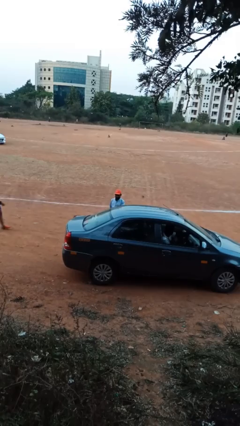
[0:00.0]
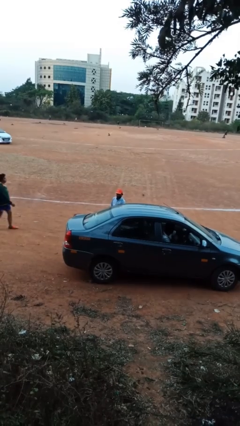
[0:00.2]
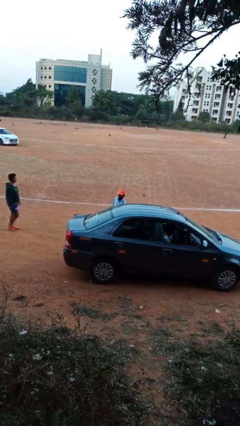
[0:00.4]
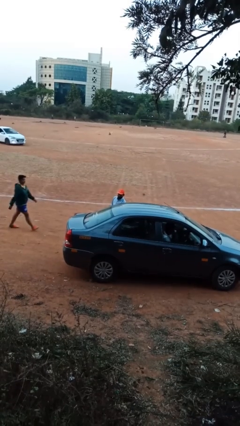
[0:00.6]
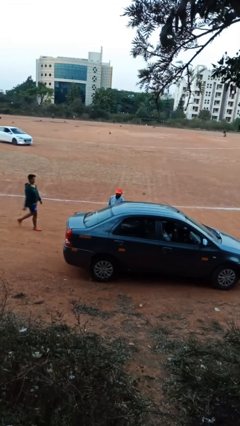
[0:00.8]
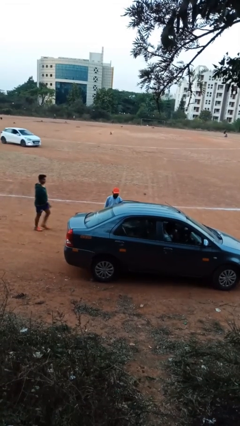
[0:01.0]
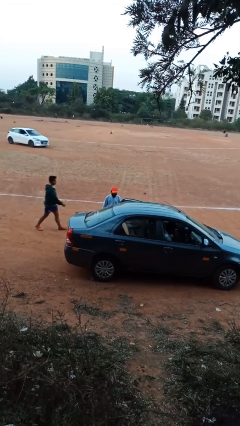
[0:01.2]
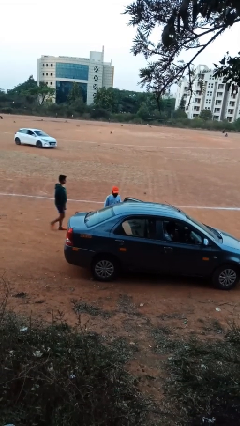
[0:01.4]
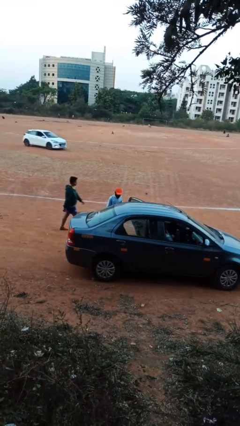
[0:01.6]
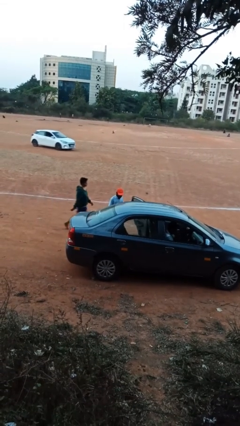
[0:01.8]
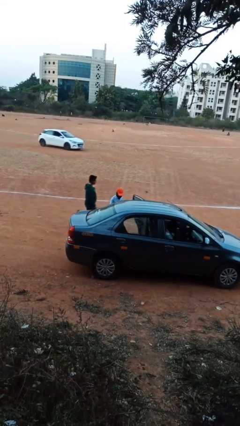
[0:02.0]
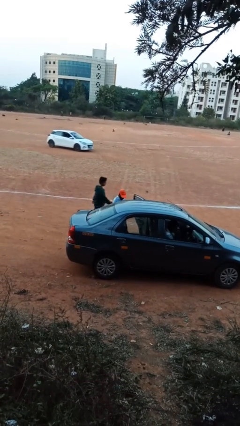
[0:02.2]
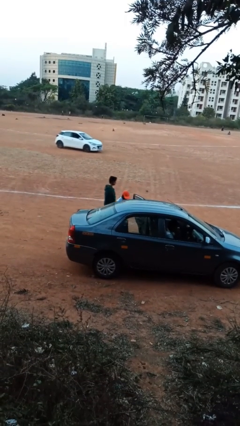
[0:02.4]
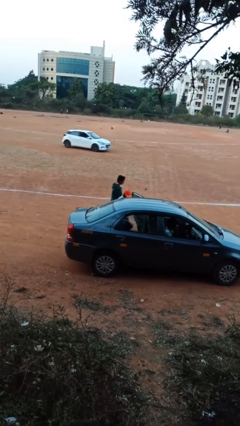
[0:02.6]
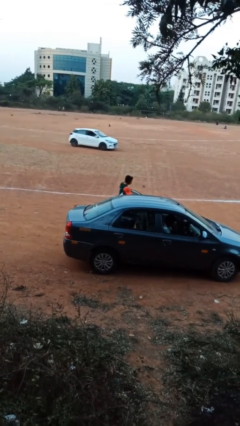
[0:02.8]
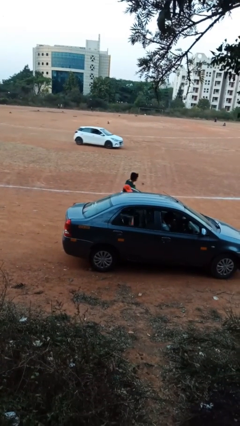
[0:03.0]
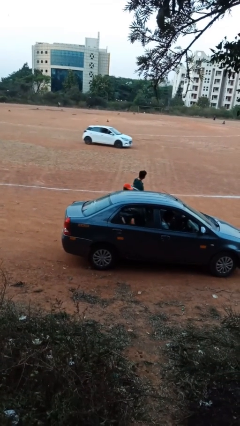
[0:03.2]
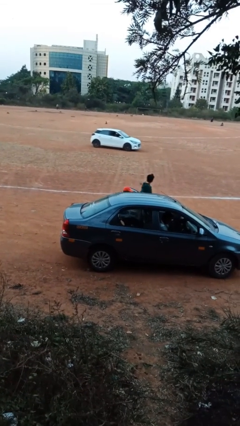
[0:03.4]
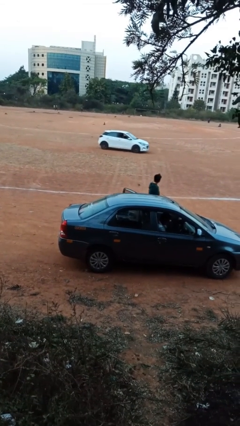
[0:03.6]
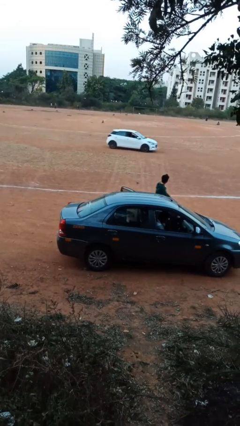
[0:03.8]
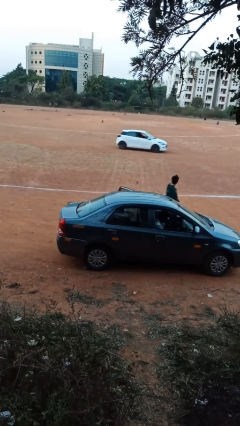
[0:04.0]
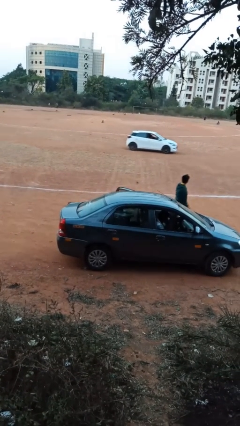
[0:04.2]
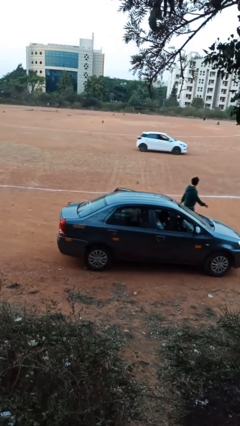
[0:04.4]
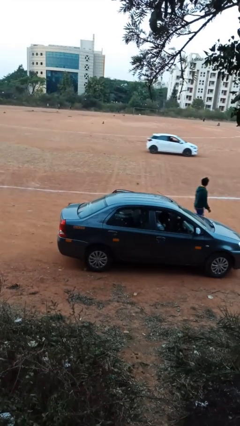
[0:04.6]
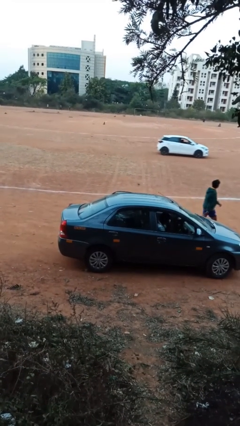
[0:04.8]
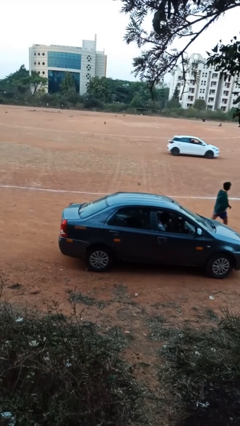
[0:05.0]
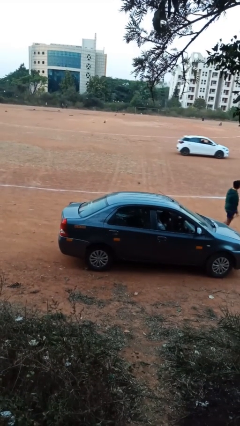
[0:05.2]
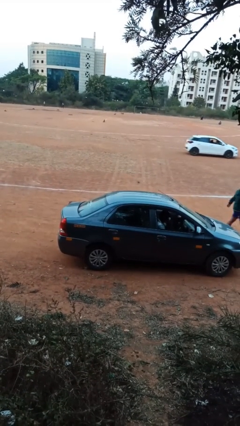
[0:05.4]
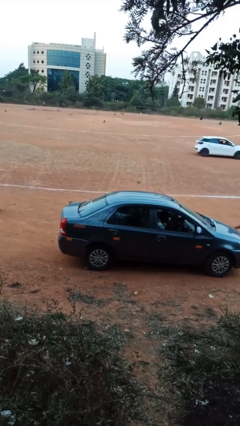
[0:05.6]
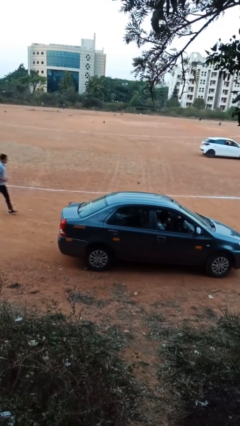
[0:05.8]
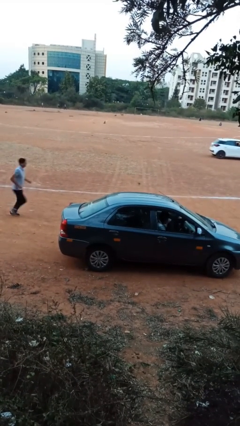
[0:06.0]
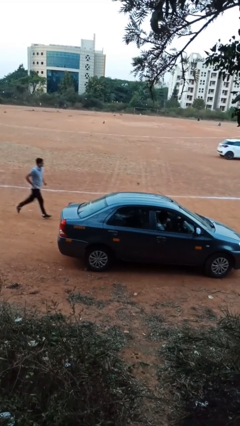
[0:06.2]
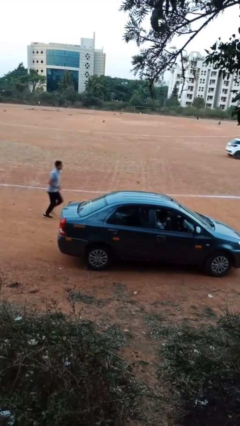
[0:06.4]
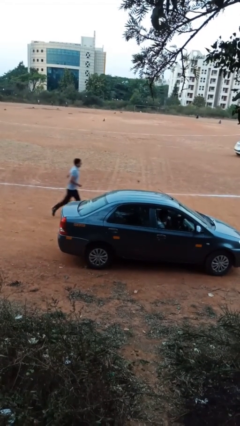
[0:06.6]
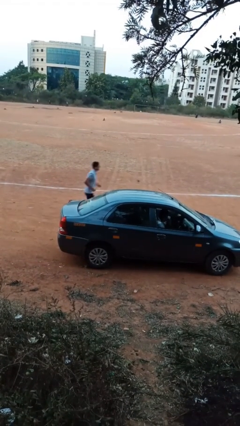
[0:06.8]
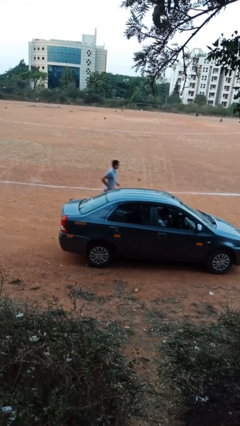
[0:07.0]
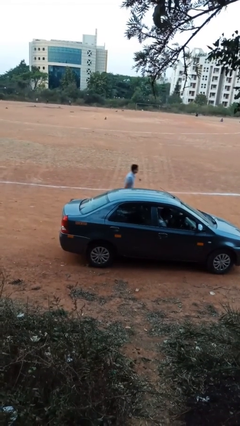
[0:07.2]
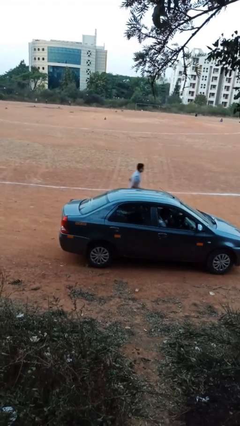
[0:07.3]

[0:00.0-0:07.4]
person enters car

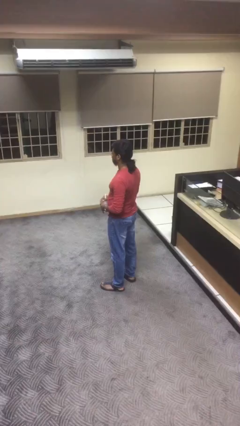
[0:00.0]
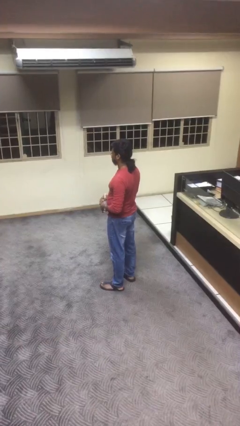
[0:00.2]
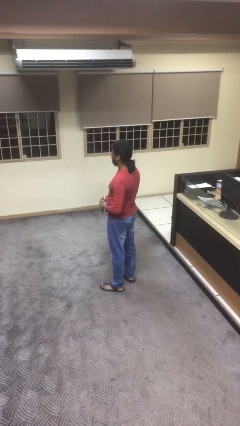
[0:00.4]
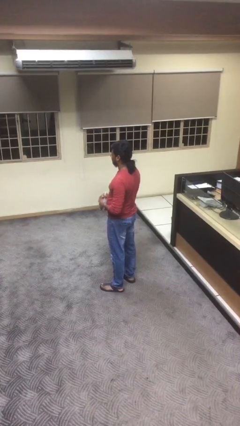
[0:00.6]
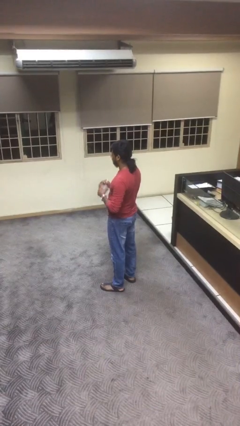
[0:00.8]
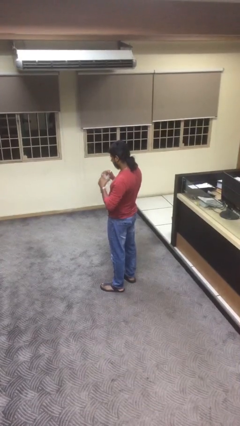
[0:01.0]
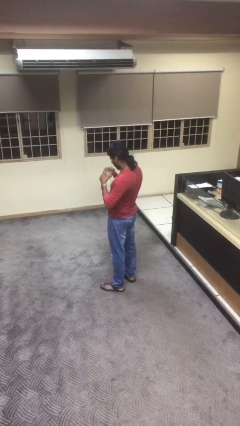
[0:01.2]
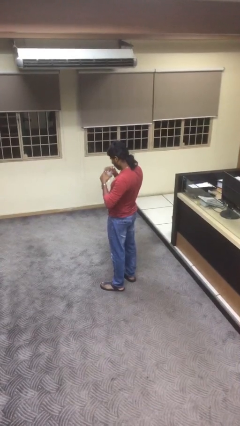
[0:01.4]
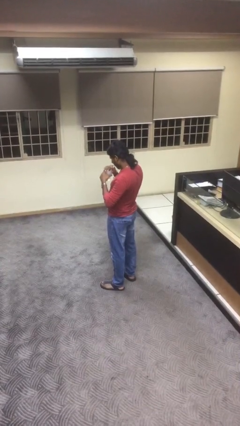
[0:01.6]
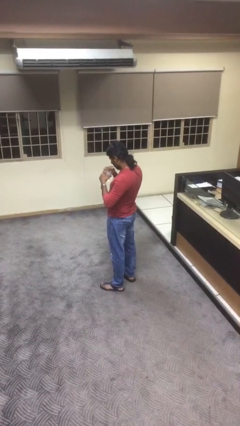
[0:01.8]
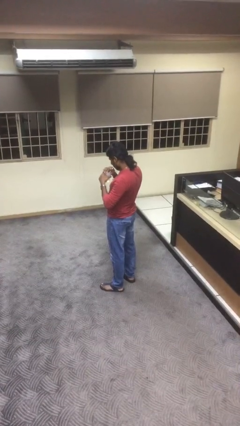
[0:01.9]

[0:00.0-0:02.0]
person drinks from straw

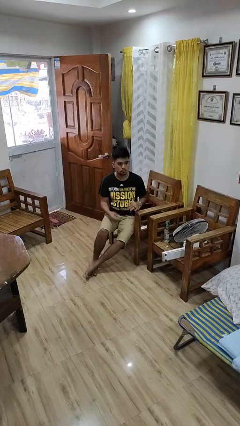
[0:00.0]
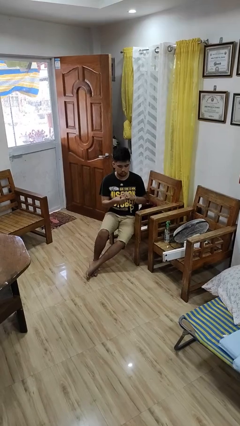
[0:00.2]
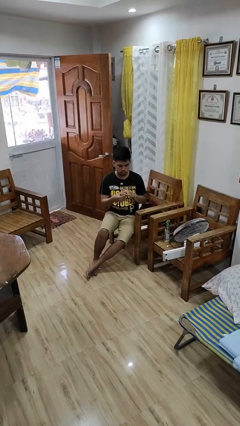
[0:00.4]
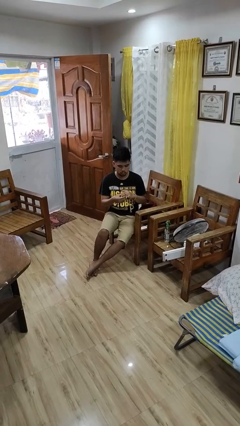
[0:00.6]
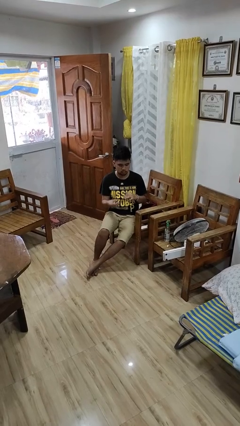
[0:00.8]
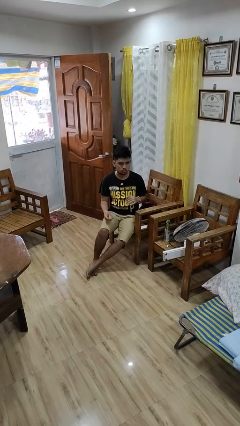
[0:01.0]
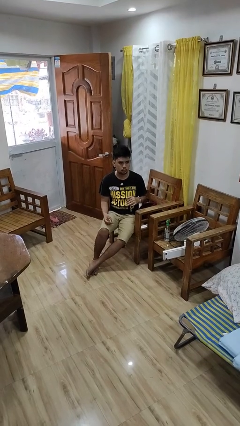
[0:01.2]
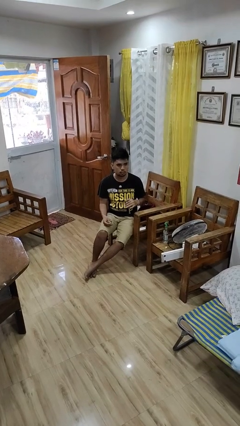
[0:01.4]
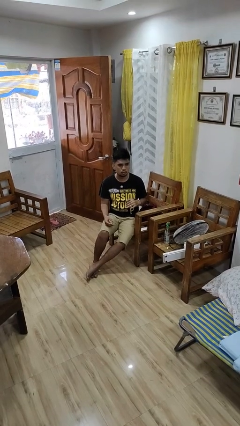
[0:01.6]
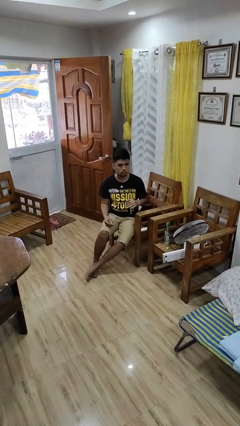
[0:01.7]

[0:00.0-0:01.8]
person takes off ring

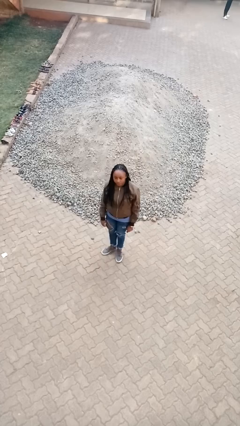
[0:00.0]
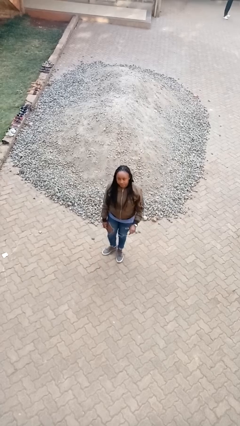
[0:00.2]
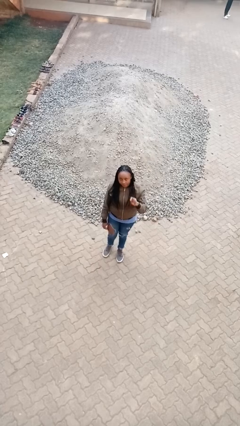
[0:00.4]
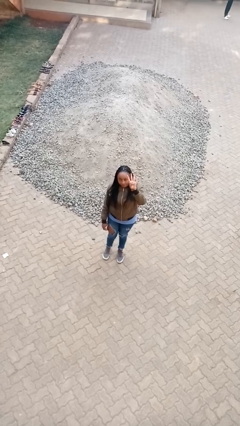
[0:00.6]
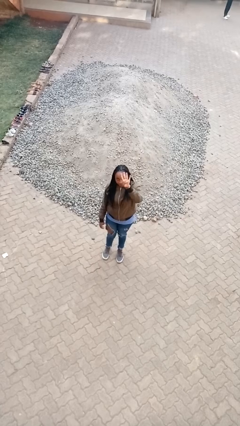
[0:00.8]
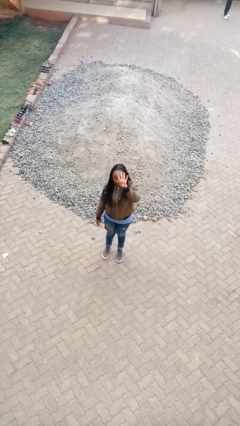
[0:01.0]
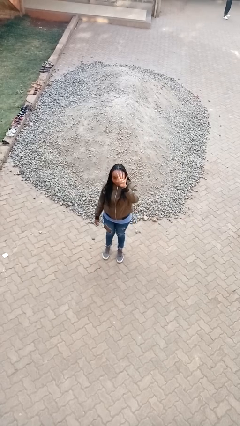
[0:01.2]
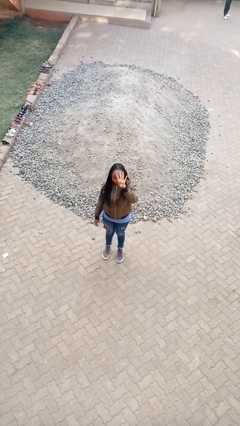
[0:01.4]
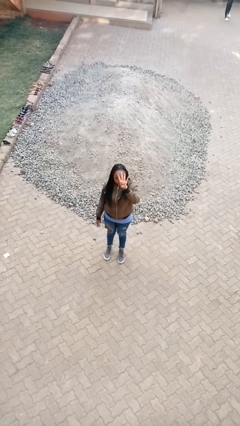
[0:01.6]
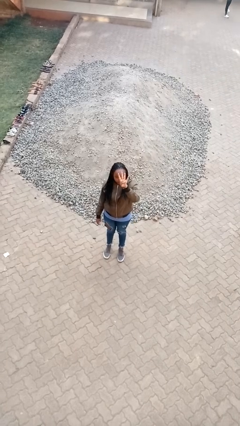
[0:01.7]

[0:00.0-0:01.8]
person gestures number four

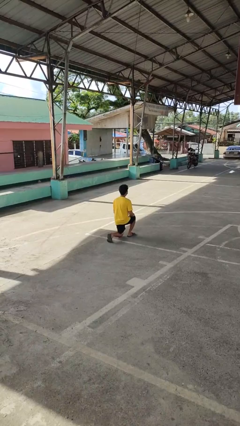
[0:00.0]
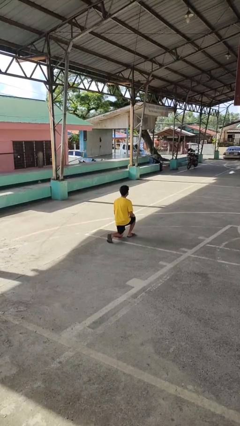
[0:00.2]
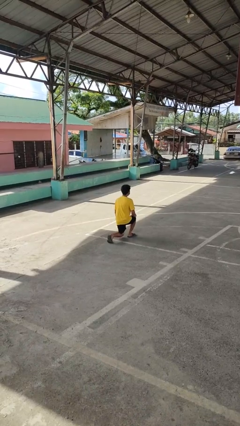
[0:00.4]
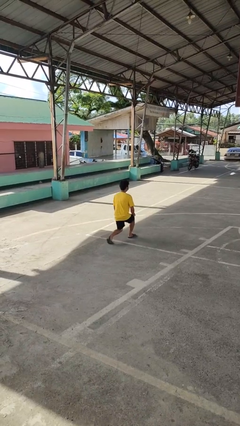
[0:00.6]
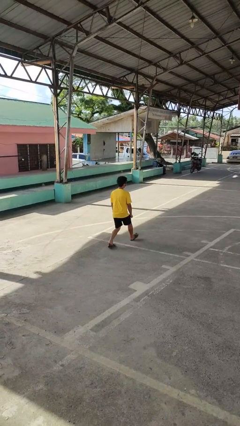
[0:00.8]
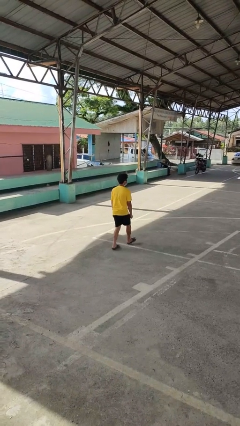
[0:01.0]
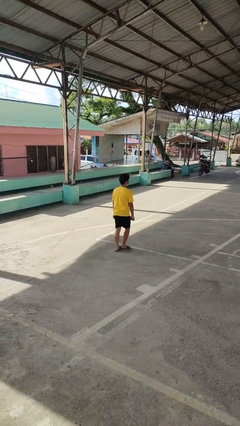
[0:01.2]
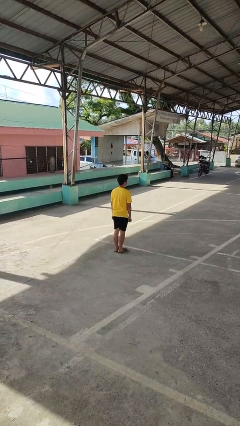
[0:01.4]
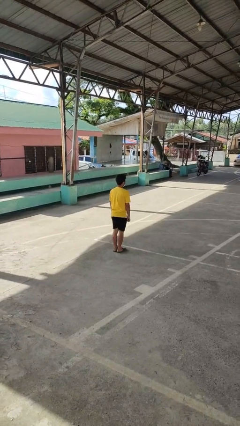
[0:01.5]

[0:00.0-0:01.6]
person stands up from floor

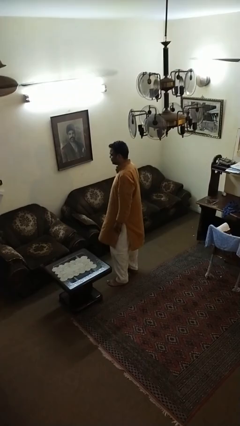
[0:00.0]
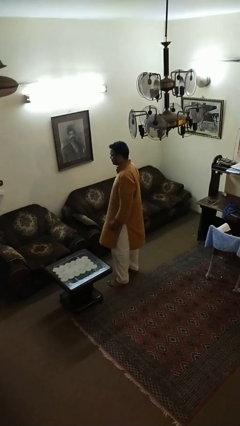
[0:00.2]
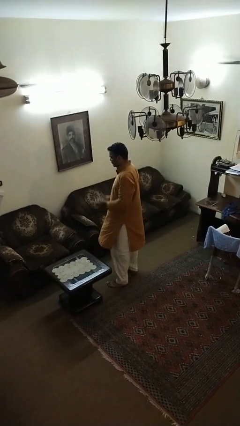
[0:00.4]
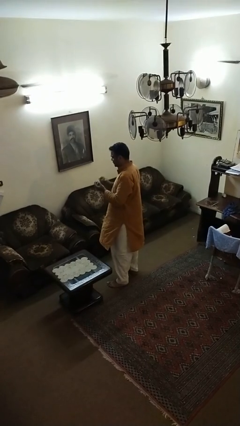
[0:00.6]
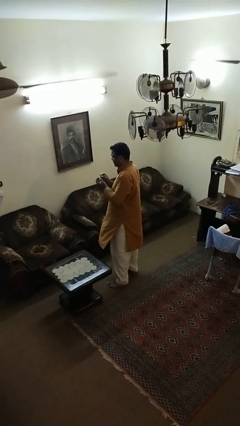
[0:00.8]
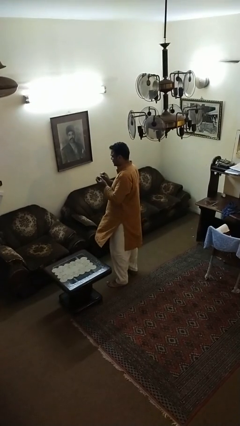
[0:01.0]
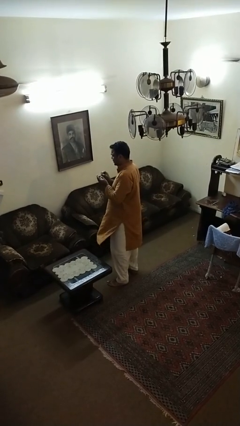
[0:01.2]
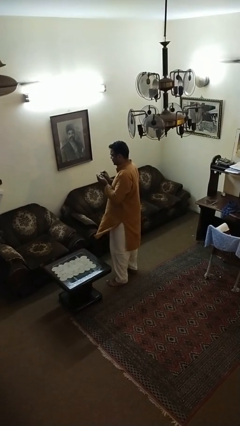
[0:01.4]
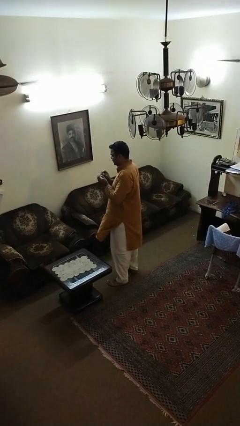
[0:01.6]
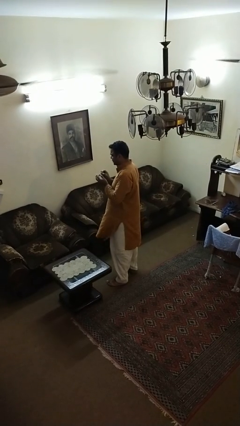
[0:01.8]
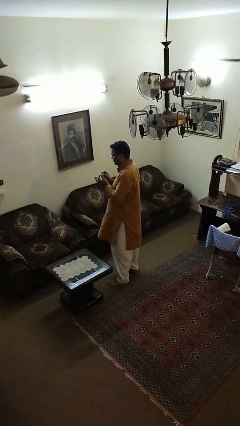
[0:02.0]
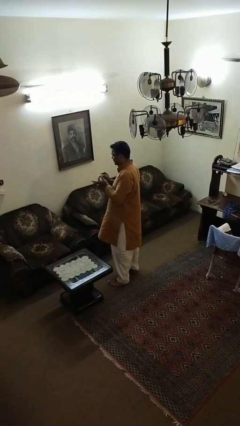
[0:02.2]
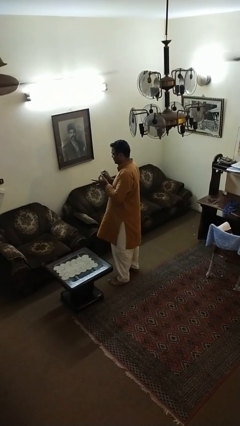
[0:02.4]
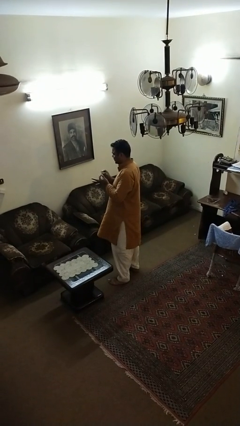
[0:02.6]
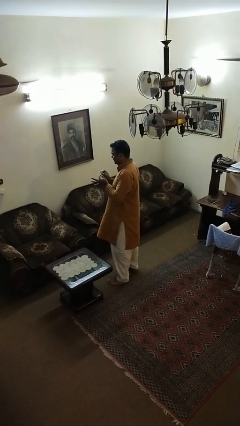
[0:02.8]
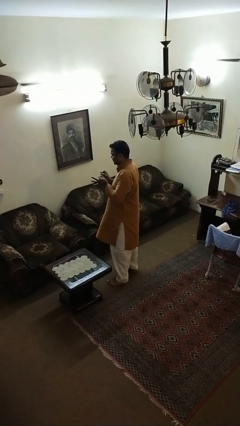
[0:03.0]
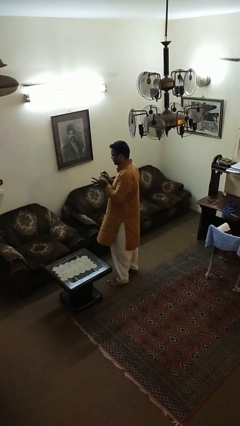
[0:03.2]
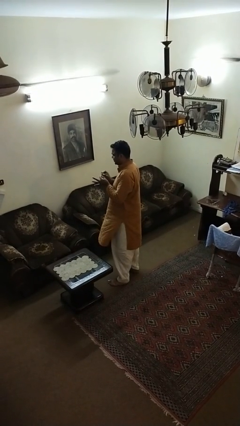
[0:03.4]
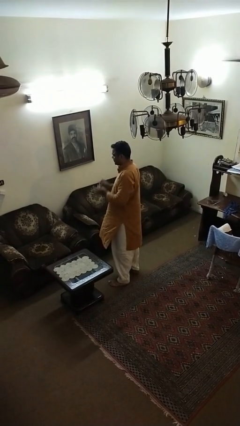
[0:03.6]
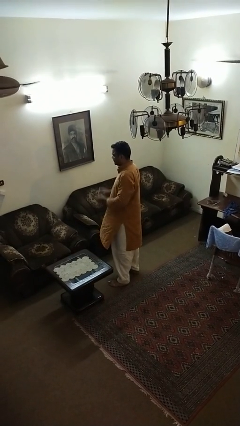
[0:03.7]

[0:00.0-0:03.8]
person clips fingernails
